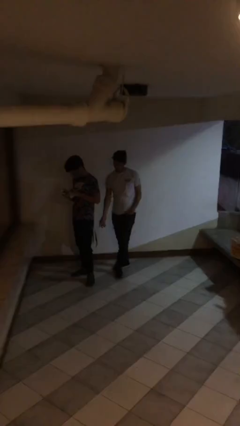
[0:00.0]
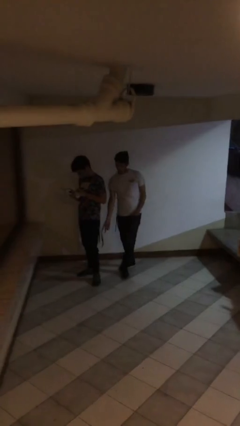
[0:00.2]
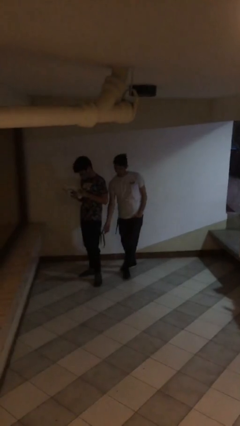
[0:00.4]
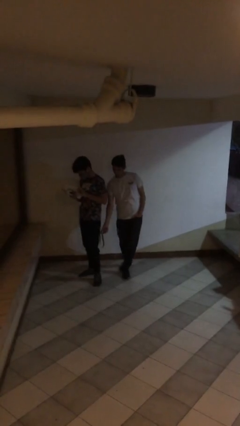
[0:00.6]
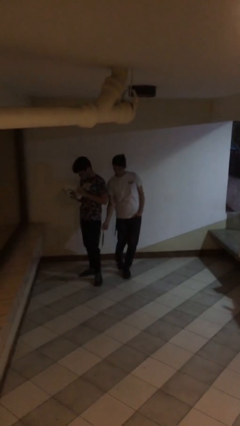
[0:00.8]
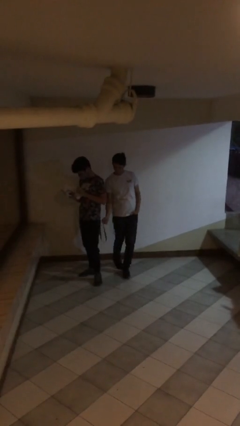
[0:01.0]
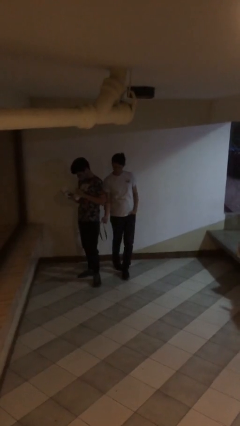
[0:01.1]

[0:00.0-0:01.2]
person steals object from person

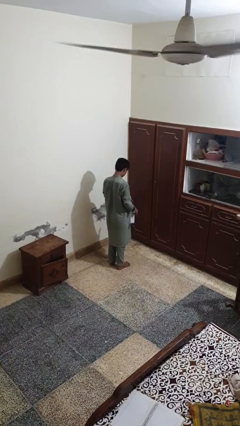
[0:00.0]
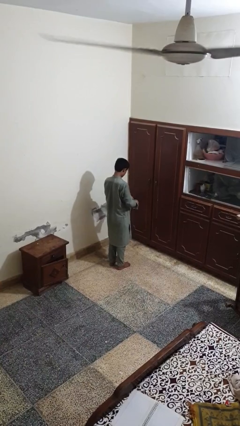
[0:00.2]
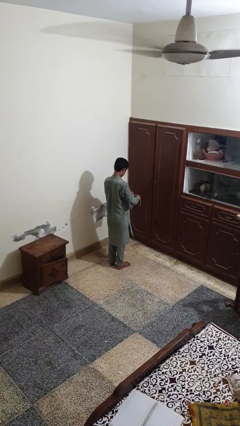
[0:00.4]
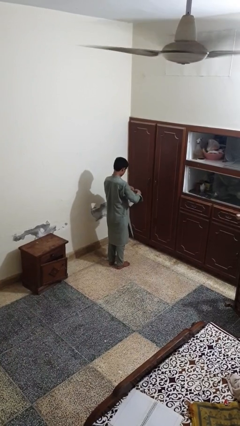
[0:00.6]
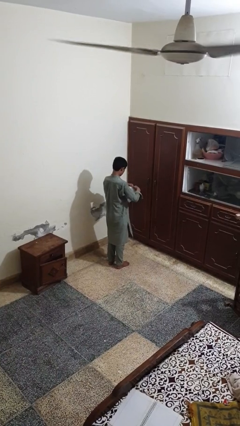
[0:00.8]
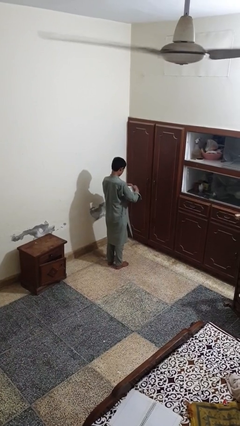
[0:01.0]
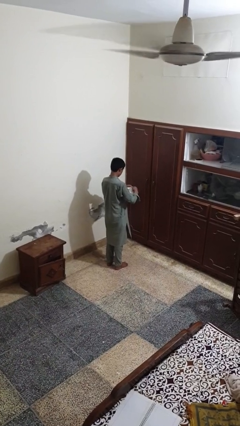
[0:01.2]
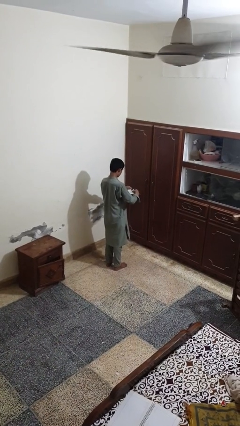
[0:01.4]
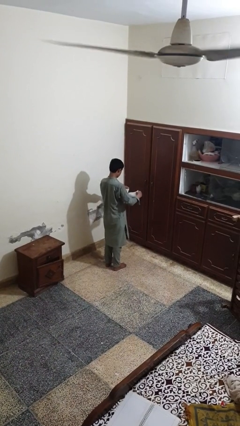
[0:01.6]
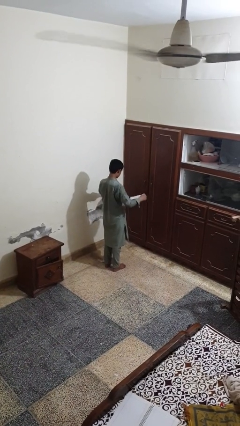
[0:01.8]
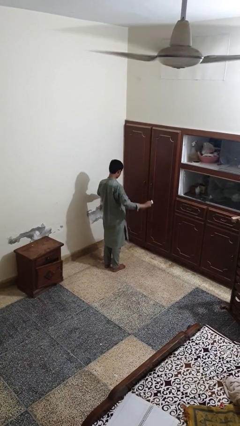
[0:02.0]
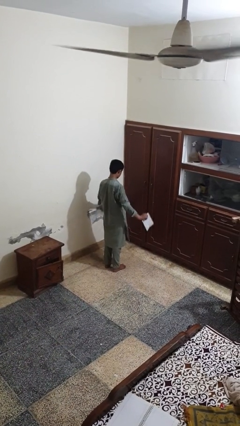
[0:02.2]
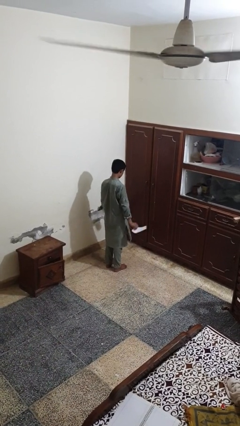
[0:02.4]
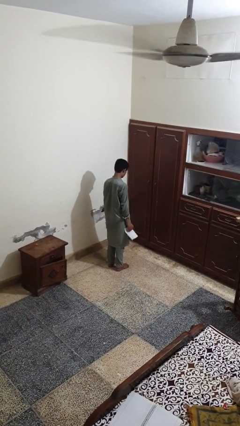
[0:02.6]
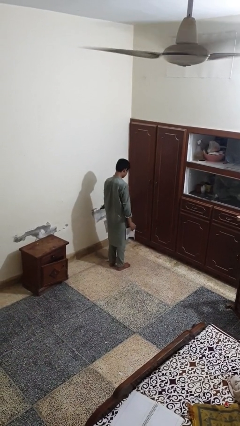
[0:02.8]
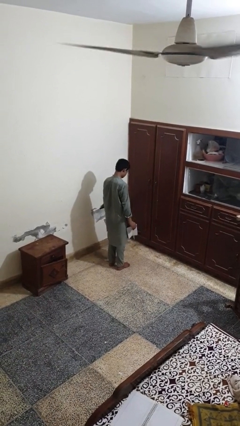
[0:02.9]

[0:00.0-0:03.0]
person tears paper

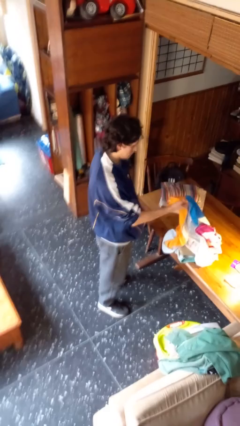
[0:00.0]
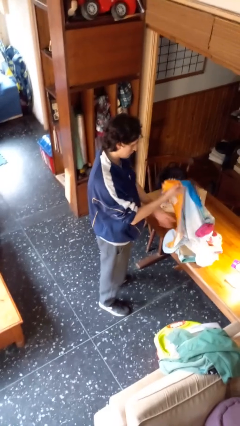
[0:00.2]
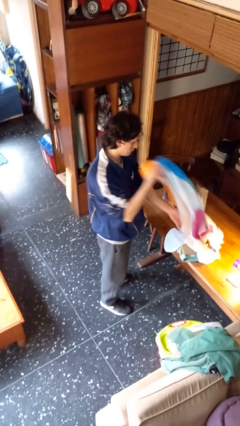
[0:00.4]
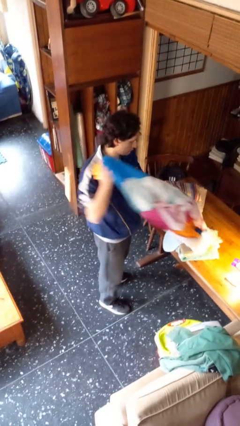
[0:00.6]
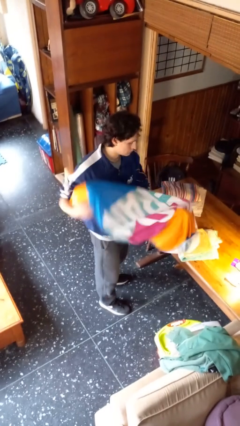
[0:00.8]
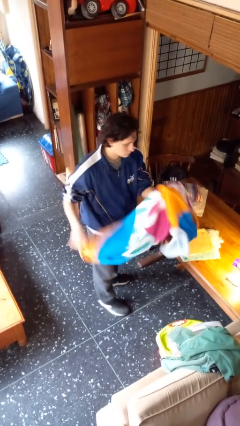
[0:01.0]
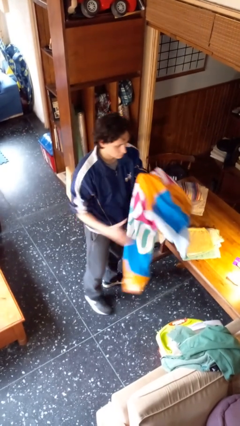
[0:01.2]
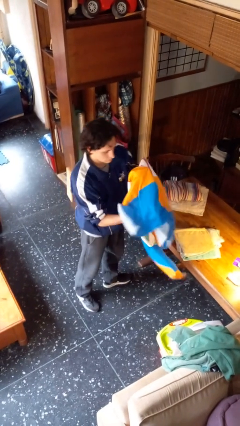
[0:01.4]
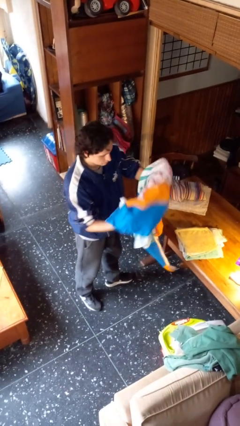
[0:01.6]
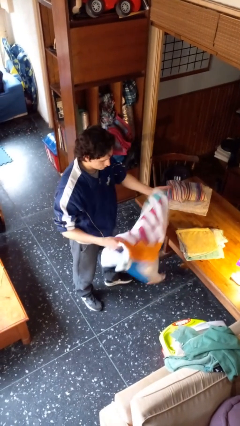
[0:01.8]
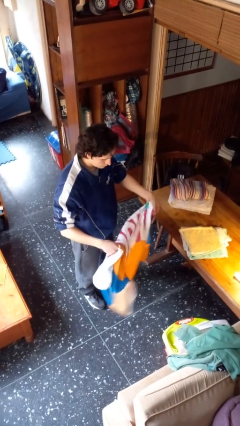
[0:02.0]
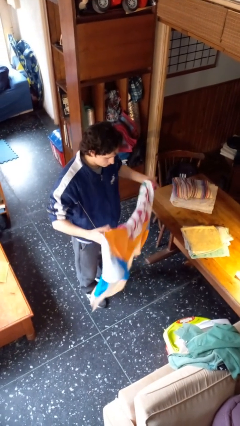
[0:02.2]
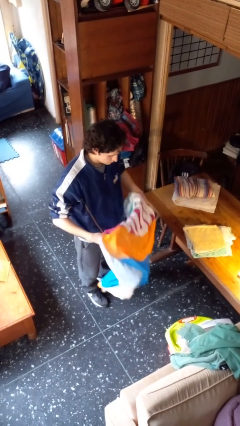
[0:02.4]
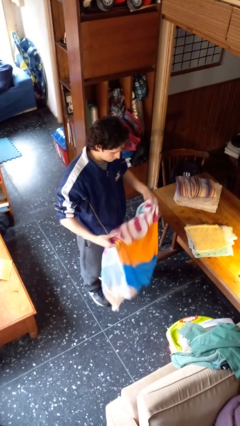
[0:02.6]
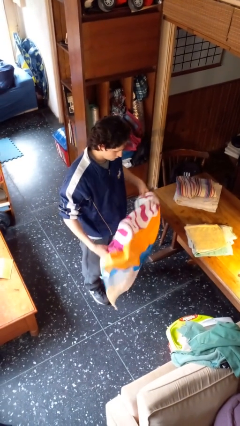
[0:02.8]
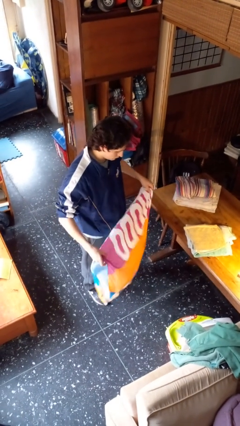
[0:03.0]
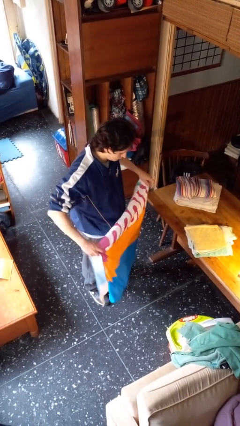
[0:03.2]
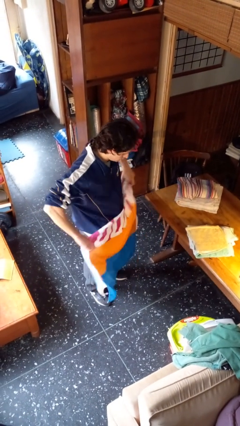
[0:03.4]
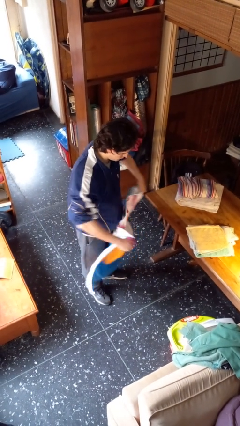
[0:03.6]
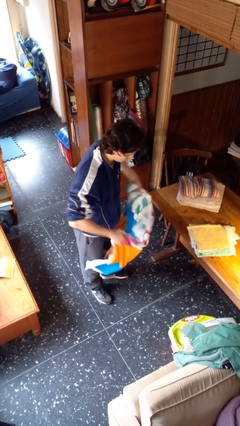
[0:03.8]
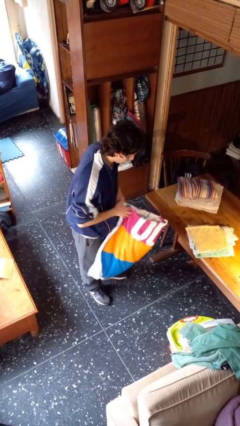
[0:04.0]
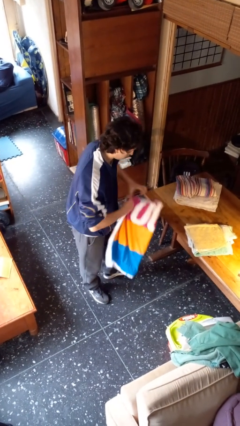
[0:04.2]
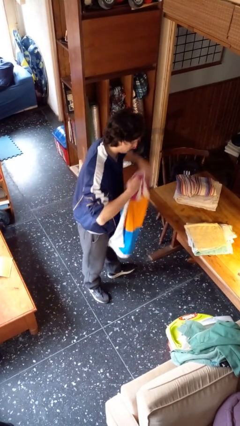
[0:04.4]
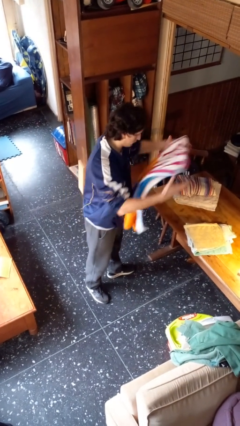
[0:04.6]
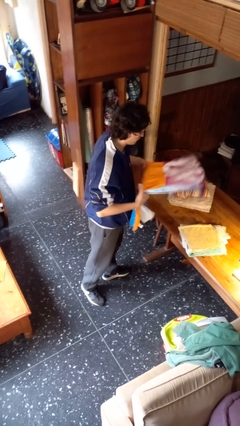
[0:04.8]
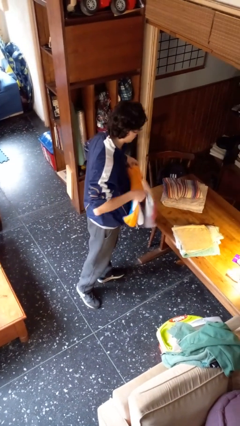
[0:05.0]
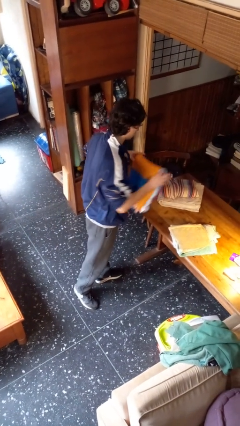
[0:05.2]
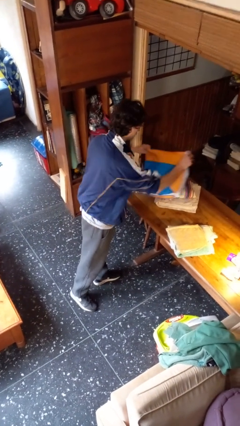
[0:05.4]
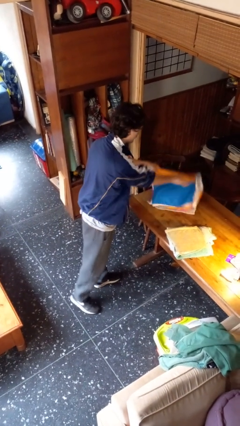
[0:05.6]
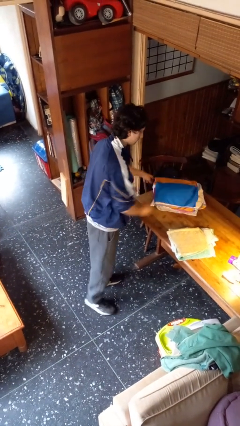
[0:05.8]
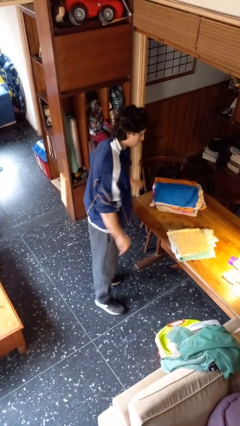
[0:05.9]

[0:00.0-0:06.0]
person folds towel

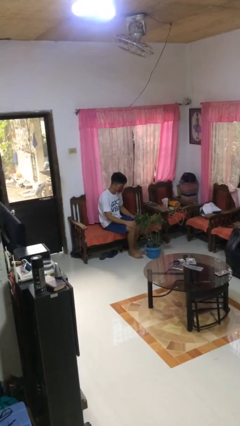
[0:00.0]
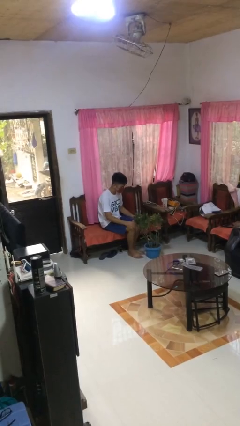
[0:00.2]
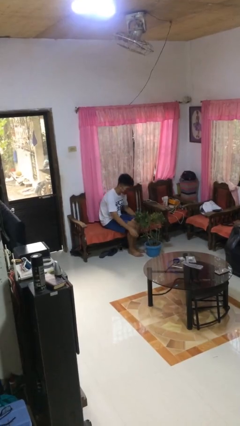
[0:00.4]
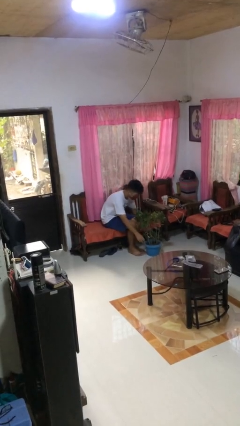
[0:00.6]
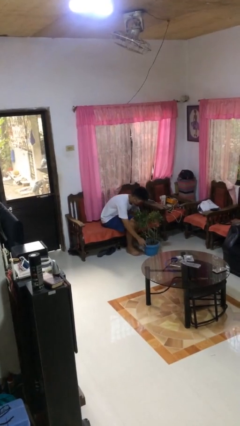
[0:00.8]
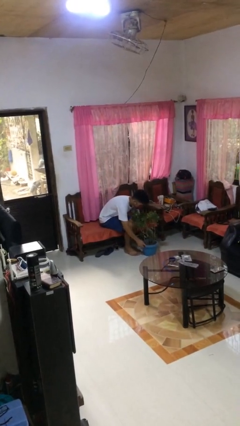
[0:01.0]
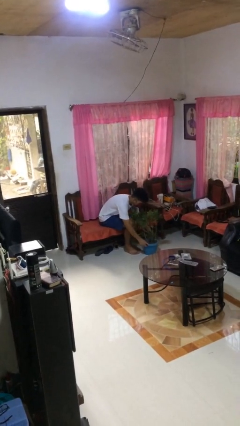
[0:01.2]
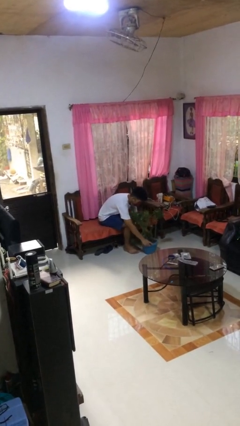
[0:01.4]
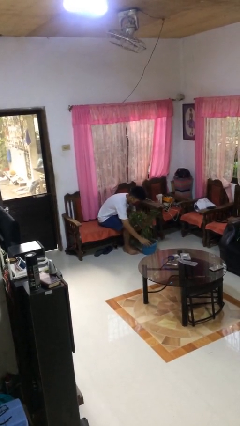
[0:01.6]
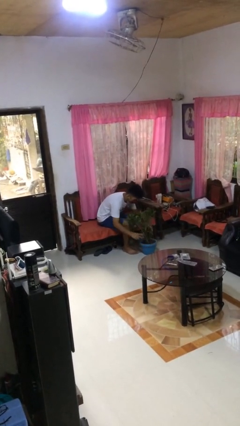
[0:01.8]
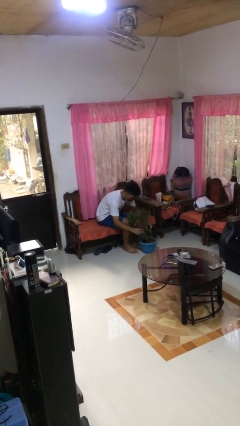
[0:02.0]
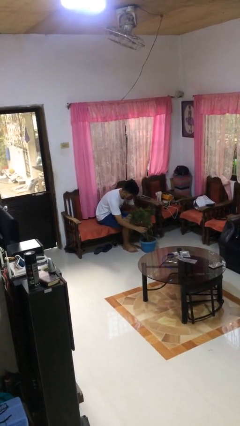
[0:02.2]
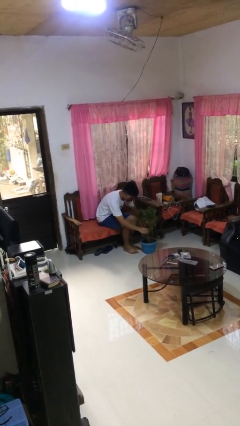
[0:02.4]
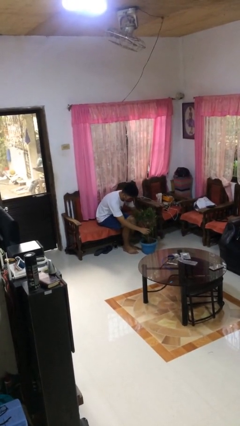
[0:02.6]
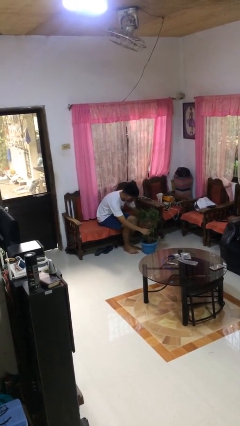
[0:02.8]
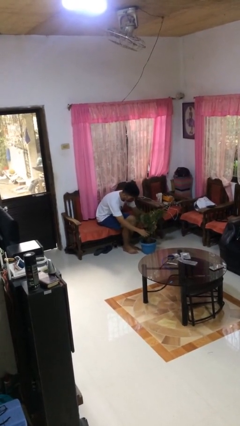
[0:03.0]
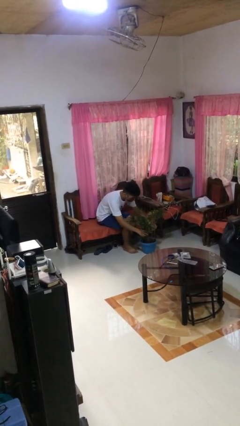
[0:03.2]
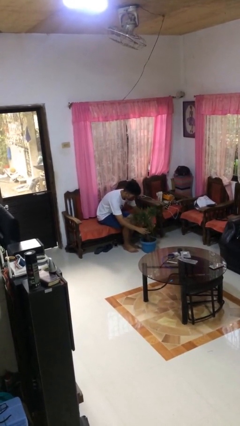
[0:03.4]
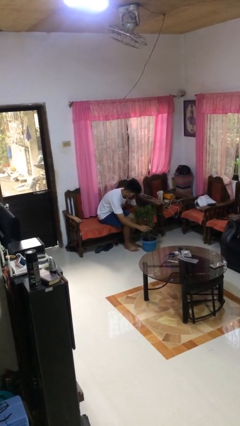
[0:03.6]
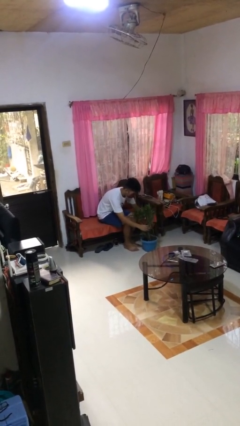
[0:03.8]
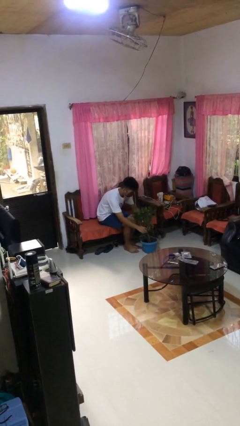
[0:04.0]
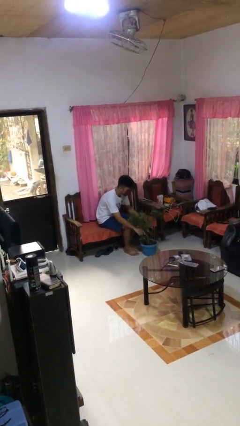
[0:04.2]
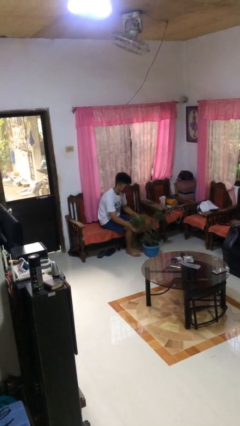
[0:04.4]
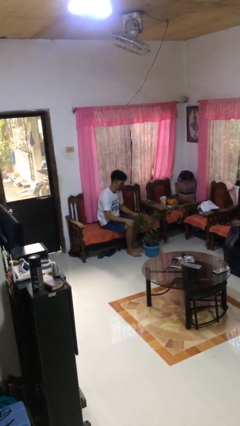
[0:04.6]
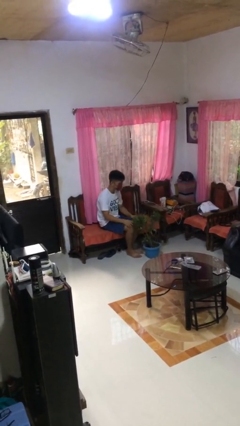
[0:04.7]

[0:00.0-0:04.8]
person arranges flowers in vase

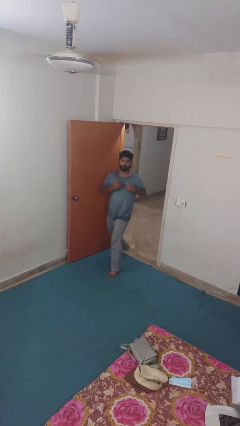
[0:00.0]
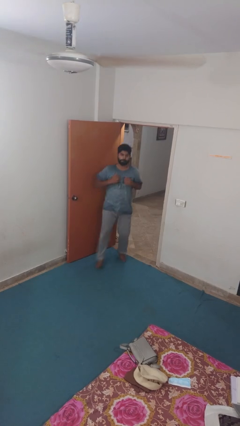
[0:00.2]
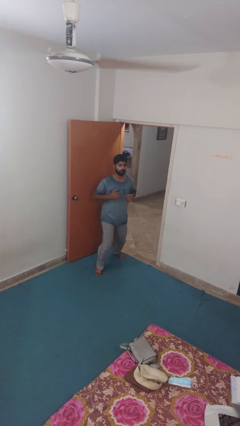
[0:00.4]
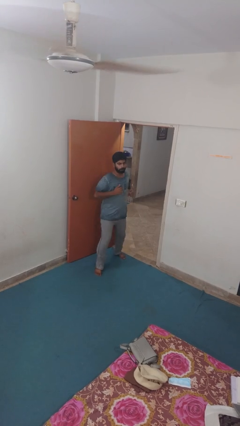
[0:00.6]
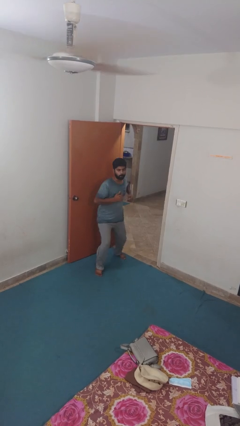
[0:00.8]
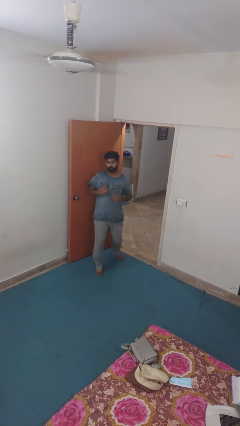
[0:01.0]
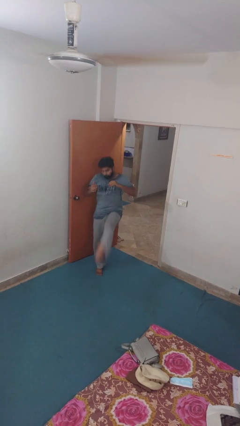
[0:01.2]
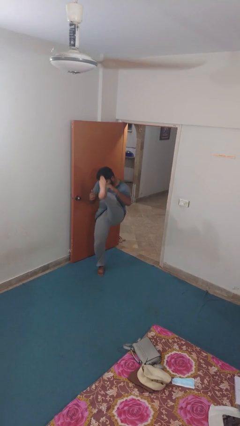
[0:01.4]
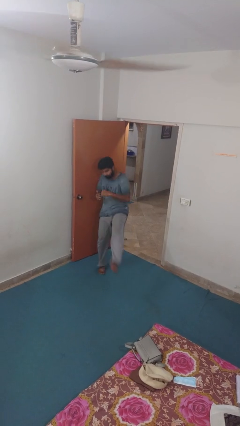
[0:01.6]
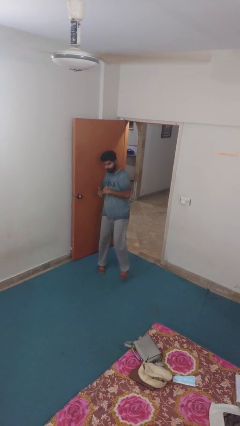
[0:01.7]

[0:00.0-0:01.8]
person karate kicks

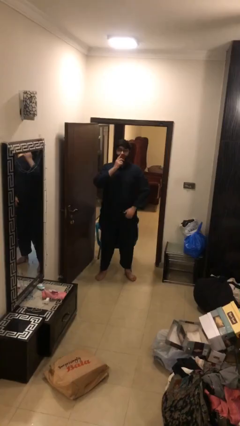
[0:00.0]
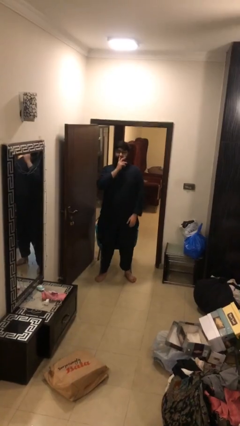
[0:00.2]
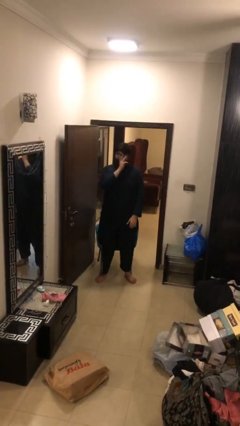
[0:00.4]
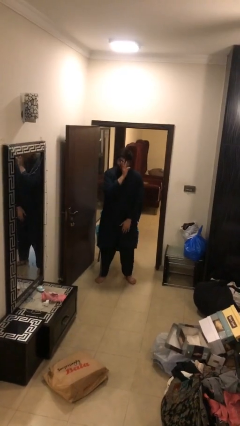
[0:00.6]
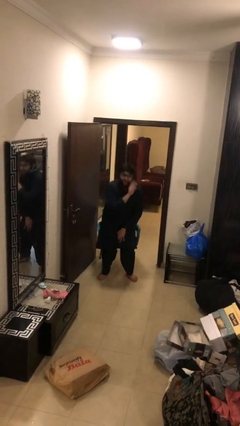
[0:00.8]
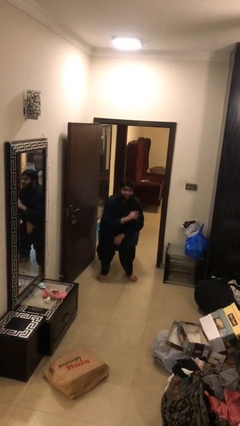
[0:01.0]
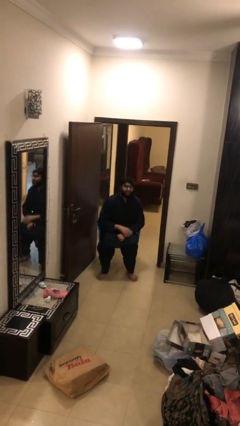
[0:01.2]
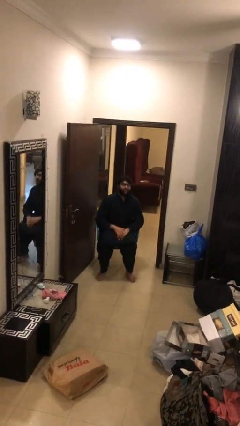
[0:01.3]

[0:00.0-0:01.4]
person sits down
